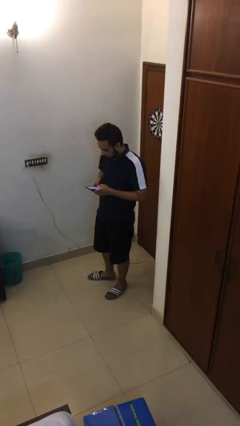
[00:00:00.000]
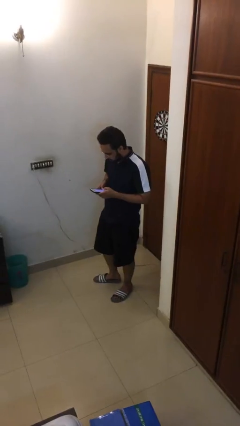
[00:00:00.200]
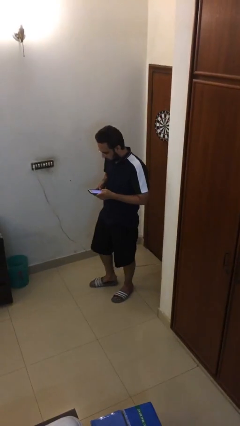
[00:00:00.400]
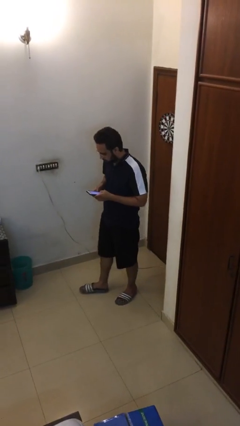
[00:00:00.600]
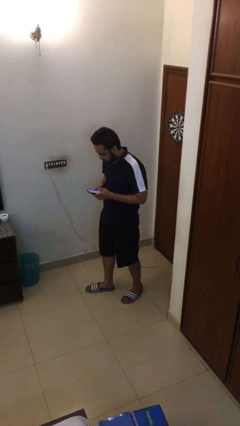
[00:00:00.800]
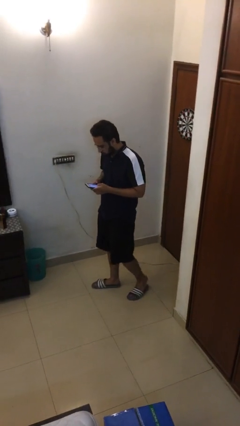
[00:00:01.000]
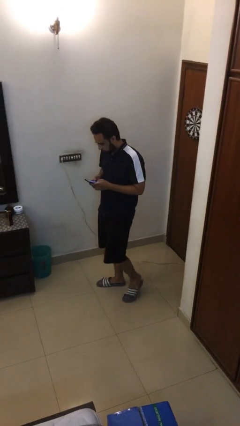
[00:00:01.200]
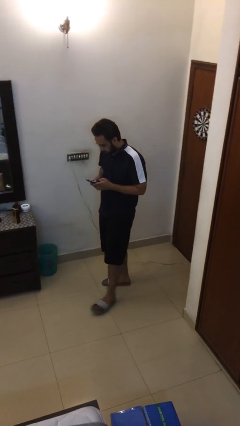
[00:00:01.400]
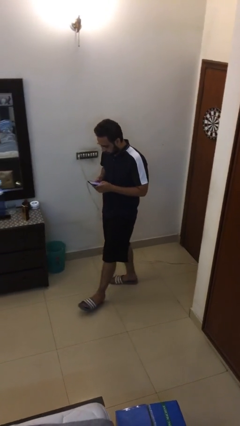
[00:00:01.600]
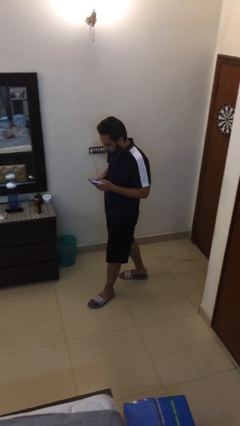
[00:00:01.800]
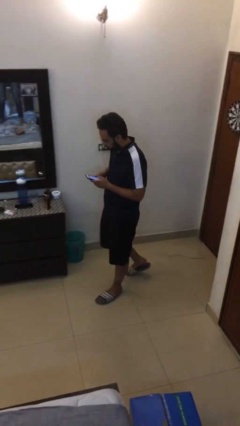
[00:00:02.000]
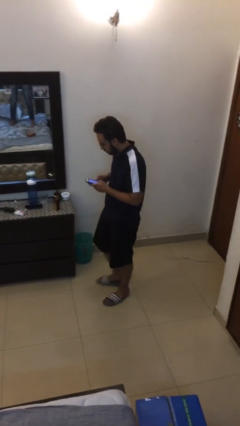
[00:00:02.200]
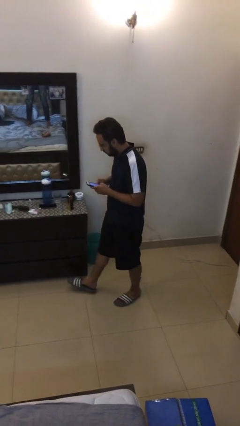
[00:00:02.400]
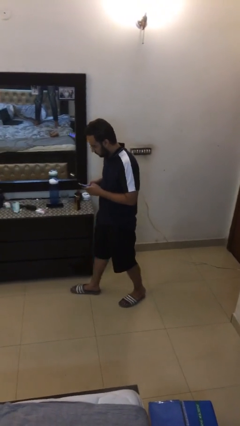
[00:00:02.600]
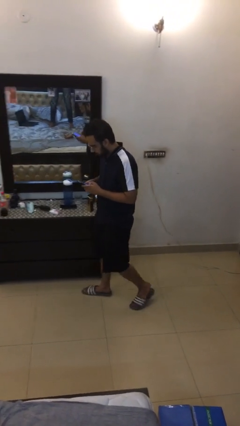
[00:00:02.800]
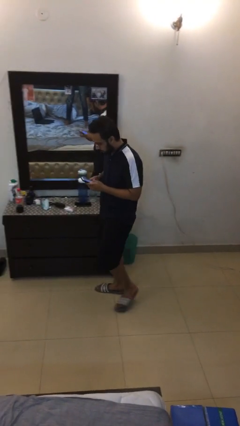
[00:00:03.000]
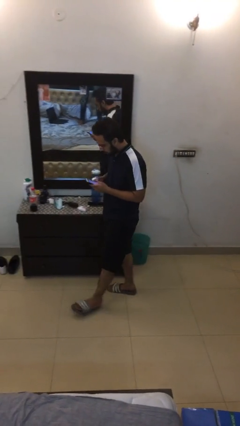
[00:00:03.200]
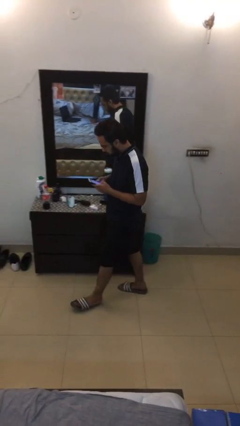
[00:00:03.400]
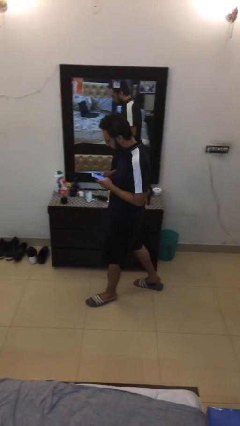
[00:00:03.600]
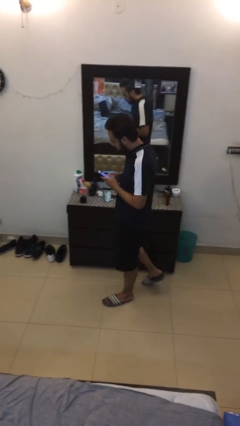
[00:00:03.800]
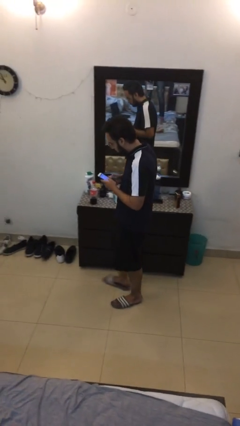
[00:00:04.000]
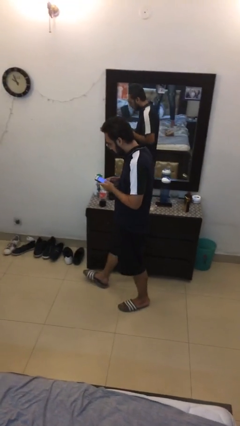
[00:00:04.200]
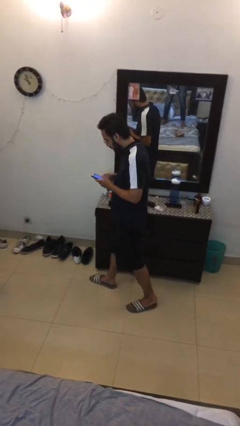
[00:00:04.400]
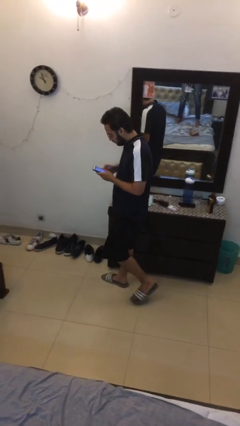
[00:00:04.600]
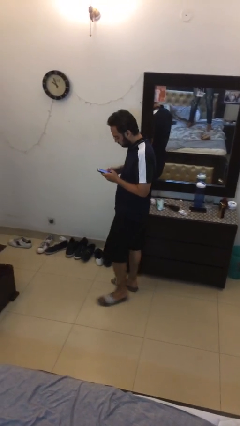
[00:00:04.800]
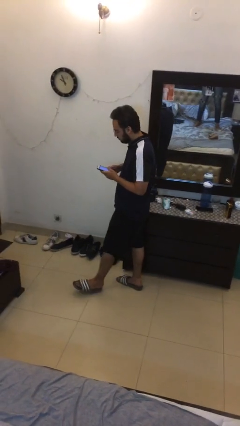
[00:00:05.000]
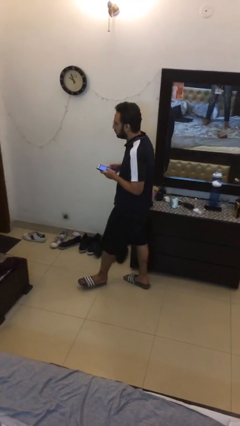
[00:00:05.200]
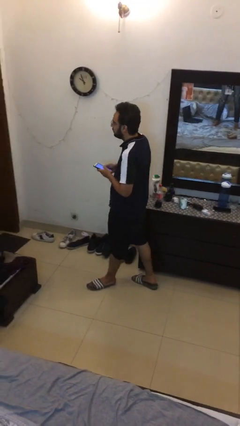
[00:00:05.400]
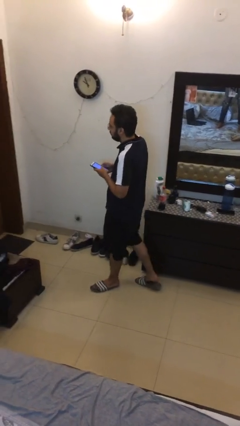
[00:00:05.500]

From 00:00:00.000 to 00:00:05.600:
person texts on phone

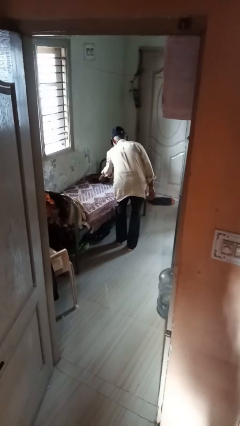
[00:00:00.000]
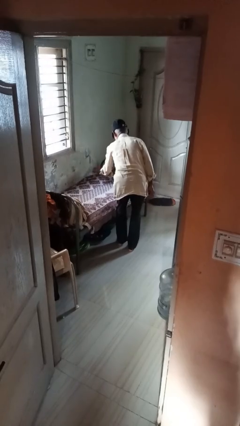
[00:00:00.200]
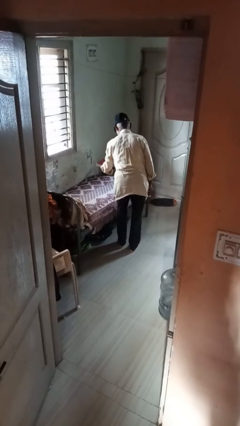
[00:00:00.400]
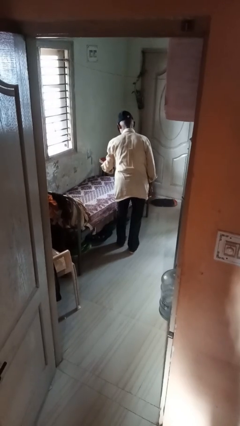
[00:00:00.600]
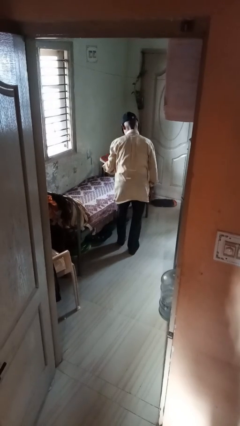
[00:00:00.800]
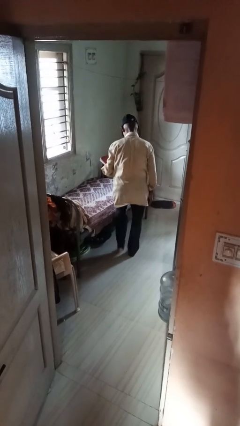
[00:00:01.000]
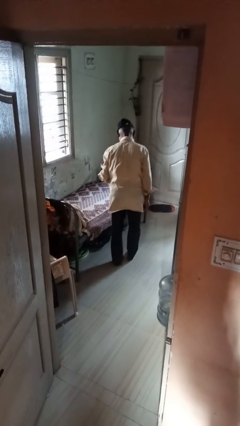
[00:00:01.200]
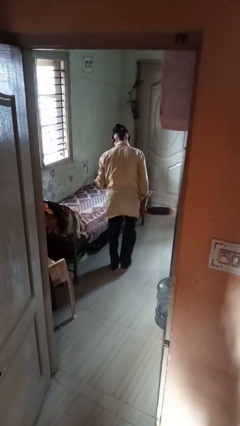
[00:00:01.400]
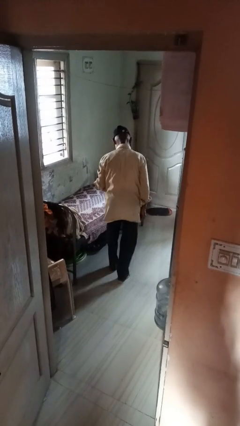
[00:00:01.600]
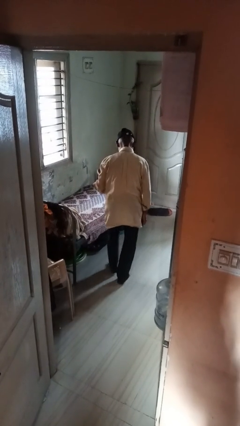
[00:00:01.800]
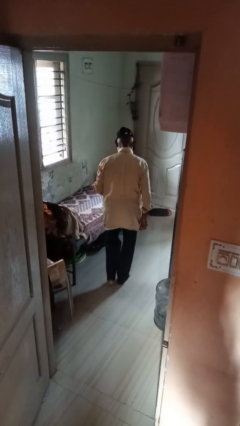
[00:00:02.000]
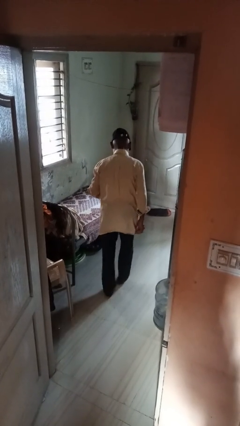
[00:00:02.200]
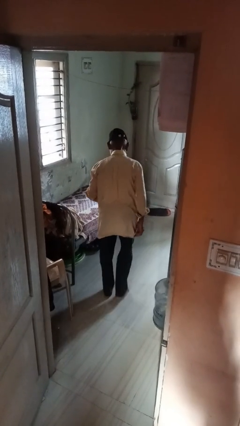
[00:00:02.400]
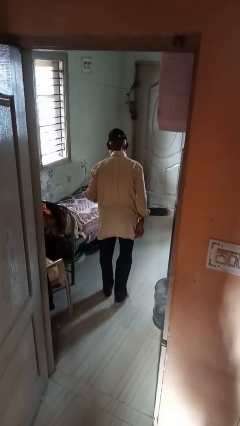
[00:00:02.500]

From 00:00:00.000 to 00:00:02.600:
person picks up object from bed

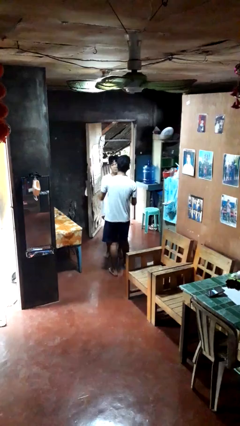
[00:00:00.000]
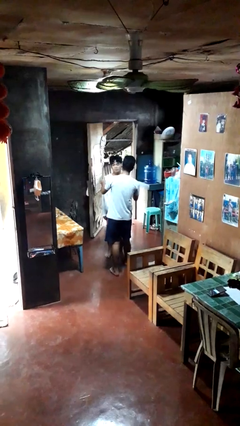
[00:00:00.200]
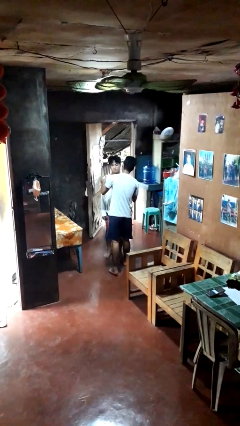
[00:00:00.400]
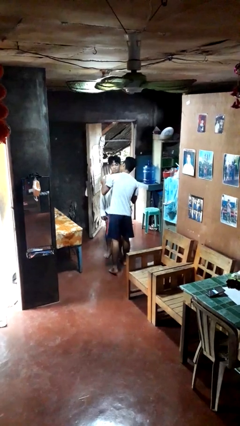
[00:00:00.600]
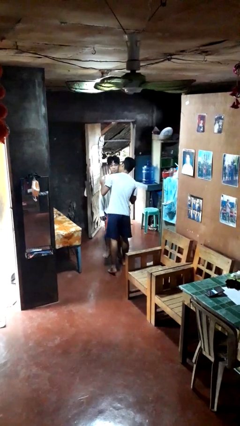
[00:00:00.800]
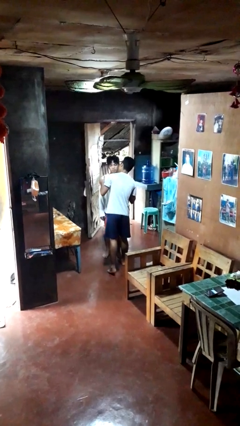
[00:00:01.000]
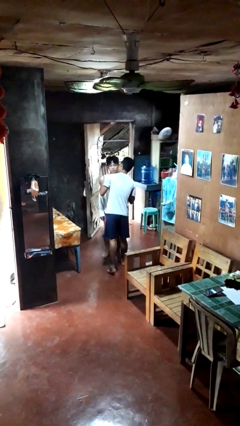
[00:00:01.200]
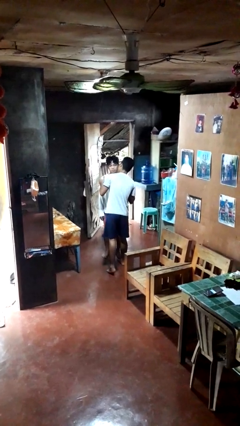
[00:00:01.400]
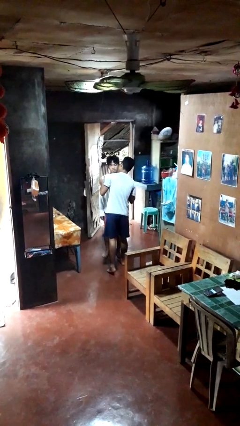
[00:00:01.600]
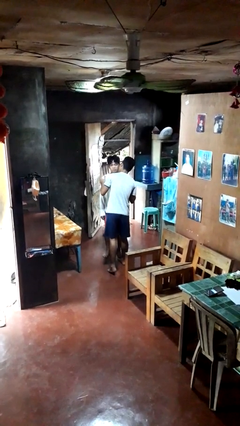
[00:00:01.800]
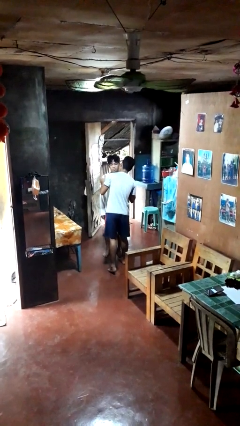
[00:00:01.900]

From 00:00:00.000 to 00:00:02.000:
person kisses cheek of person

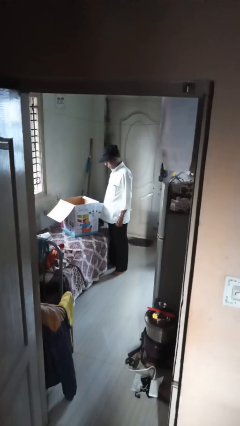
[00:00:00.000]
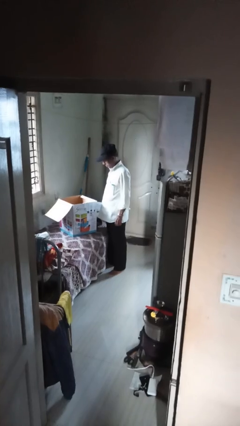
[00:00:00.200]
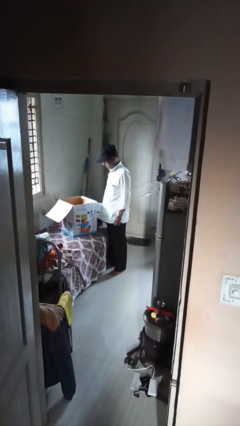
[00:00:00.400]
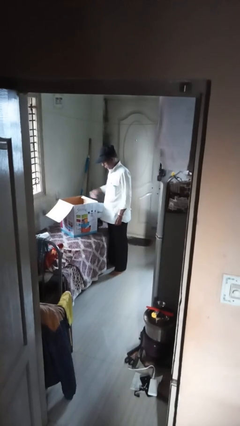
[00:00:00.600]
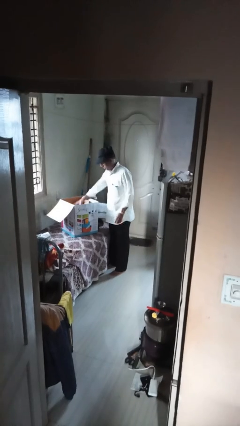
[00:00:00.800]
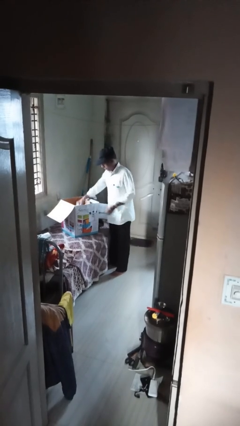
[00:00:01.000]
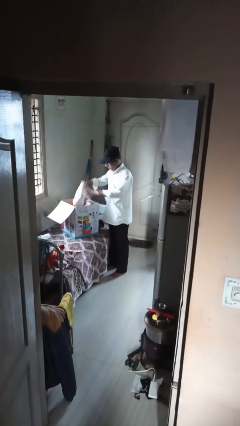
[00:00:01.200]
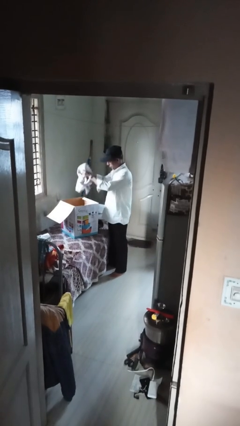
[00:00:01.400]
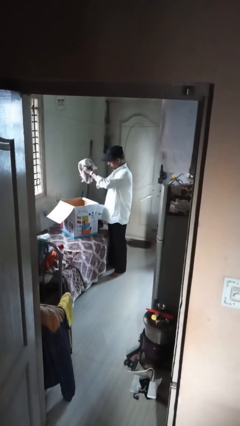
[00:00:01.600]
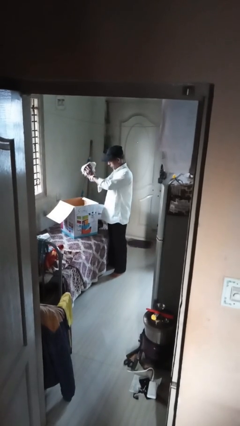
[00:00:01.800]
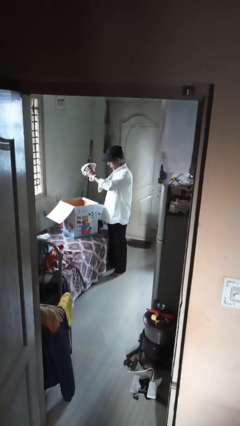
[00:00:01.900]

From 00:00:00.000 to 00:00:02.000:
person takes object from box

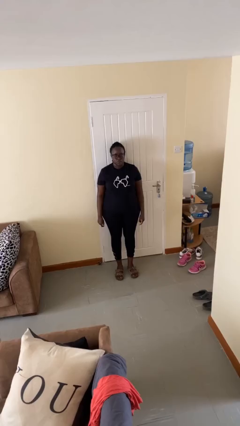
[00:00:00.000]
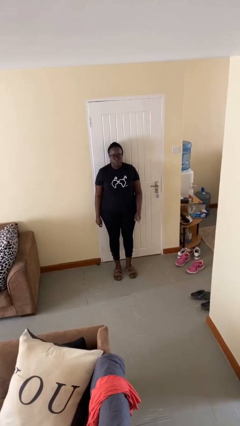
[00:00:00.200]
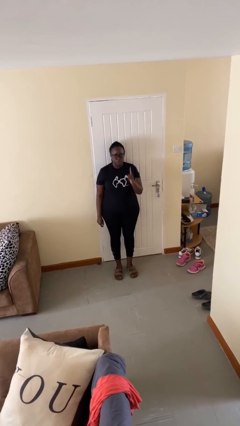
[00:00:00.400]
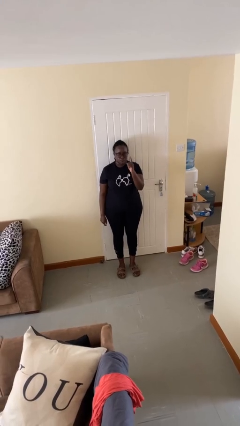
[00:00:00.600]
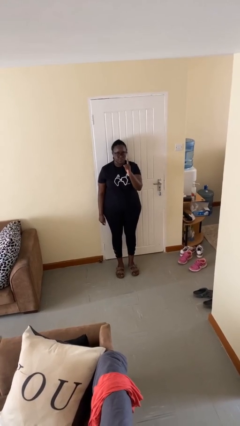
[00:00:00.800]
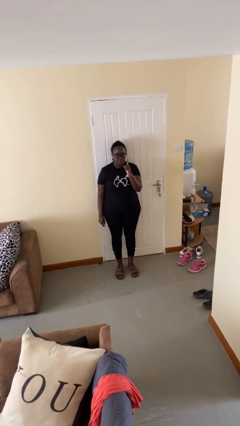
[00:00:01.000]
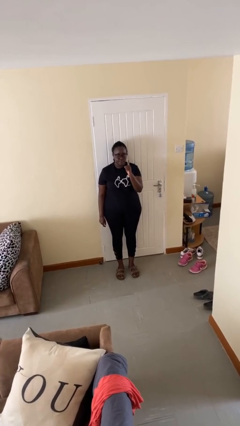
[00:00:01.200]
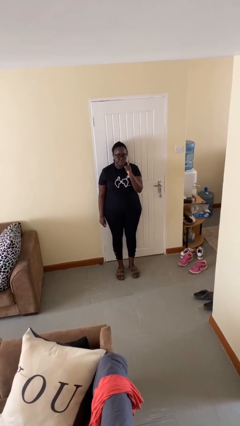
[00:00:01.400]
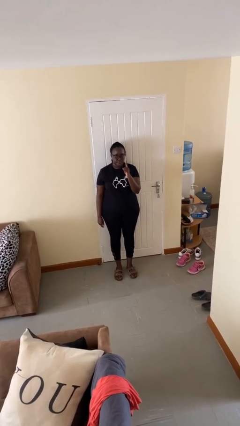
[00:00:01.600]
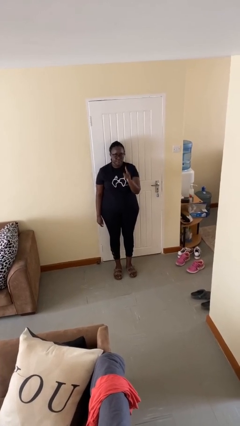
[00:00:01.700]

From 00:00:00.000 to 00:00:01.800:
person gestures number one

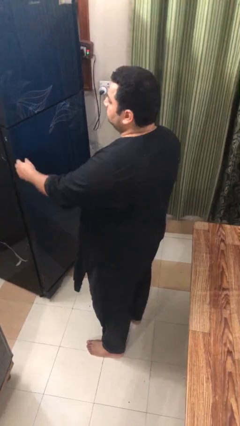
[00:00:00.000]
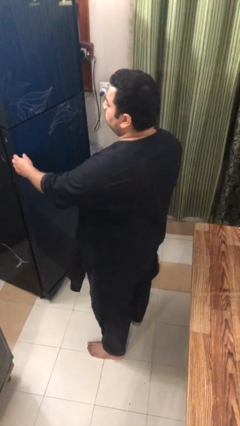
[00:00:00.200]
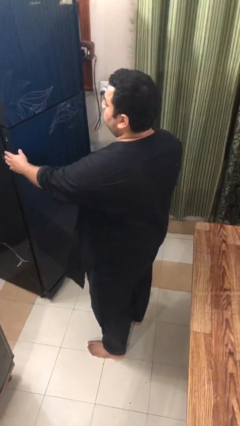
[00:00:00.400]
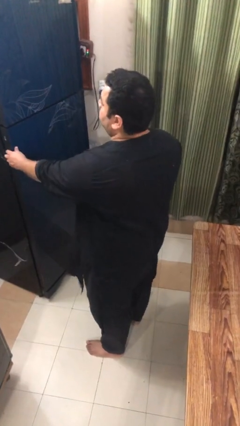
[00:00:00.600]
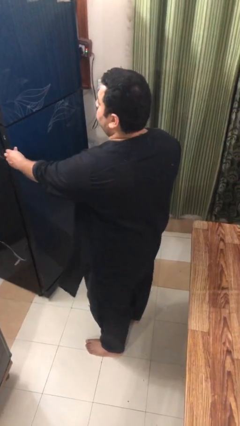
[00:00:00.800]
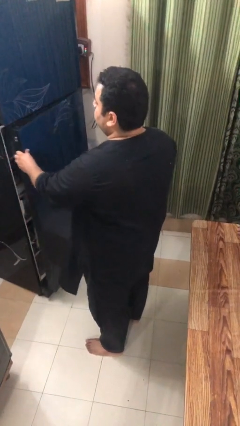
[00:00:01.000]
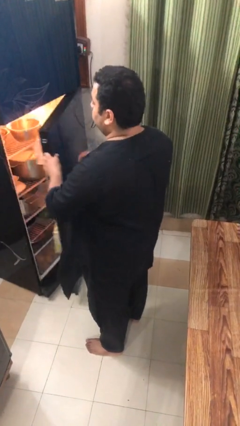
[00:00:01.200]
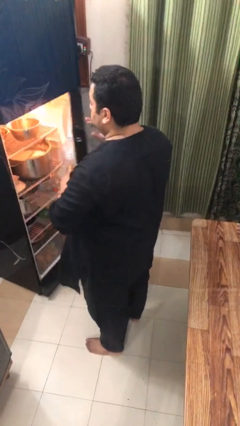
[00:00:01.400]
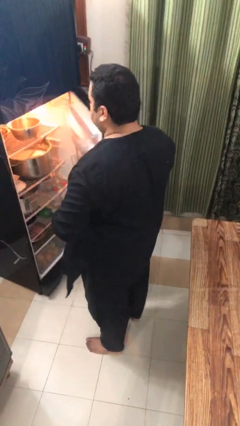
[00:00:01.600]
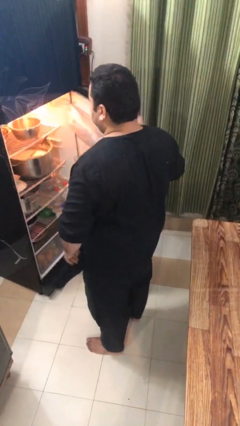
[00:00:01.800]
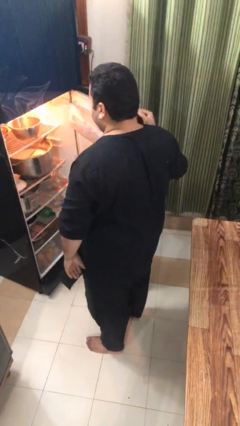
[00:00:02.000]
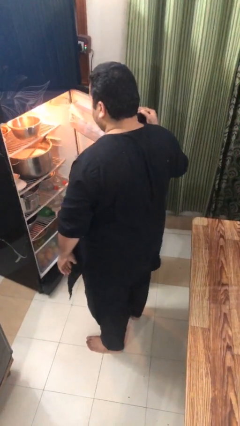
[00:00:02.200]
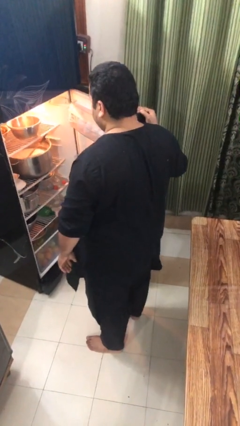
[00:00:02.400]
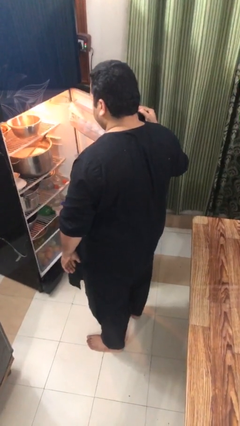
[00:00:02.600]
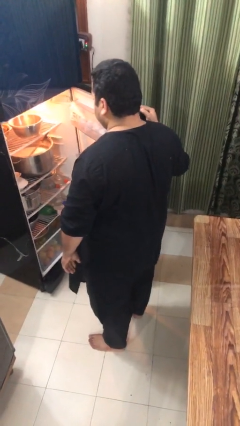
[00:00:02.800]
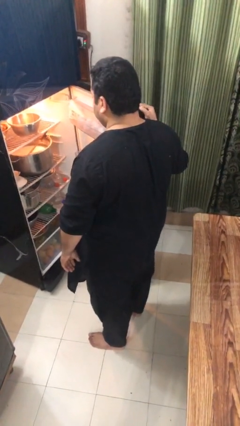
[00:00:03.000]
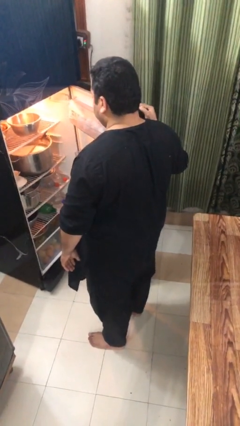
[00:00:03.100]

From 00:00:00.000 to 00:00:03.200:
person opens refrigerator
